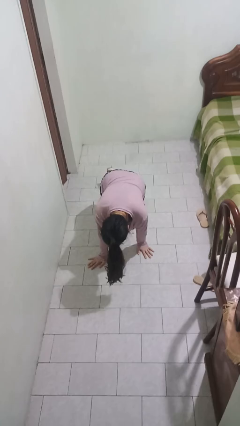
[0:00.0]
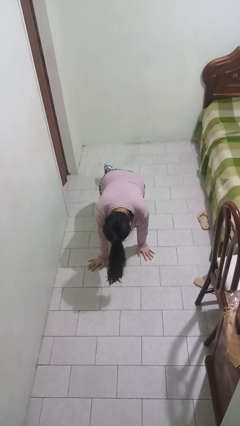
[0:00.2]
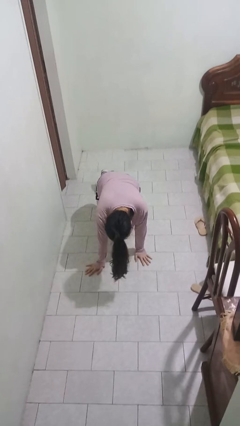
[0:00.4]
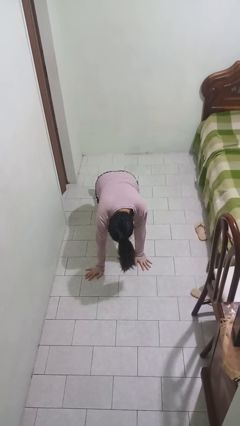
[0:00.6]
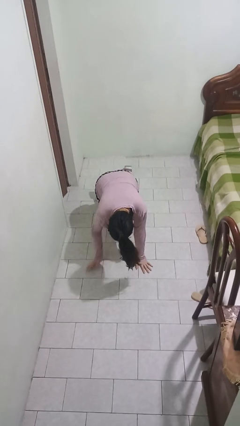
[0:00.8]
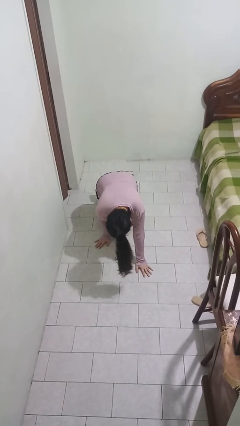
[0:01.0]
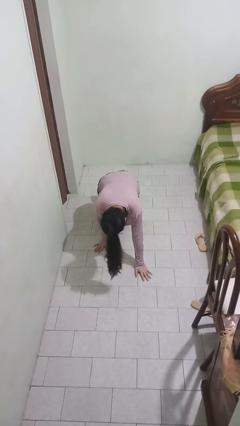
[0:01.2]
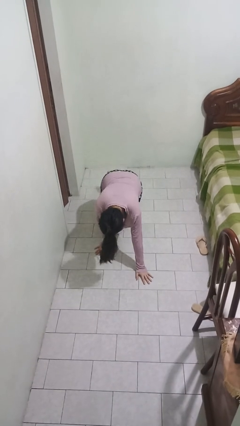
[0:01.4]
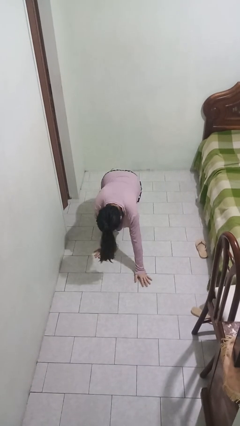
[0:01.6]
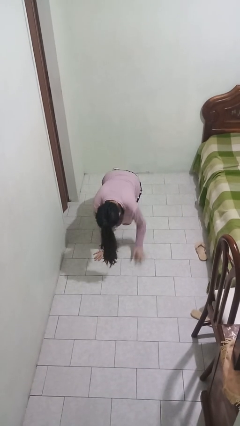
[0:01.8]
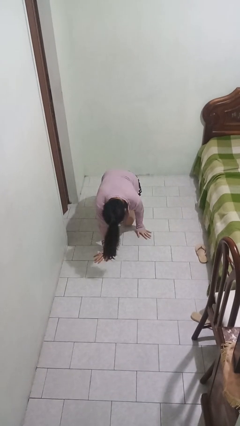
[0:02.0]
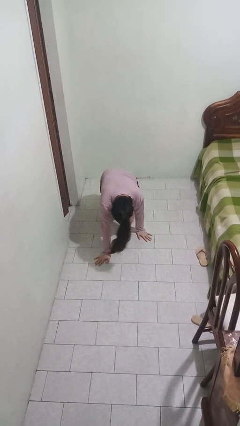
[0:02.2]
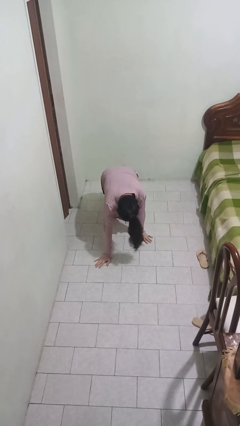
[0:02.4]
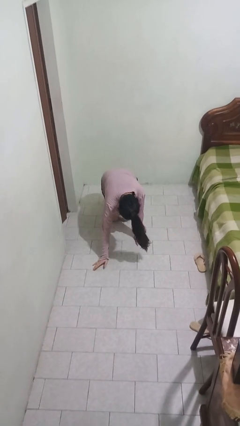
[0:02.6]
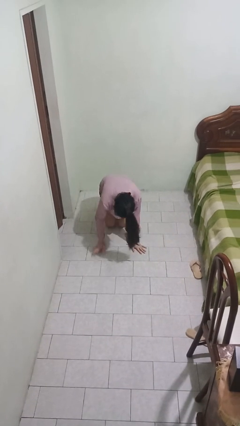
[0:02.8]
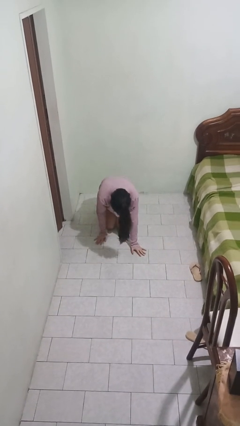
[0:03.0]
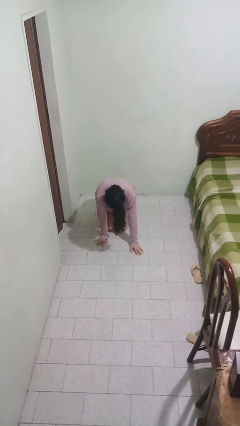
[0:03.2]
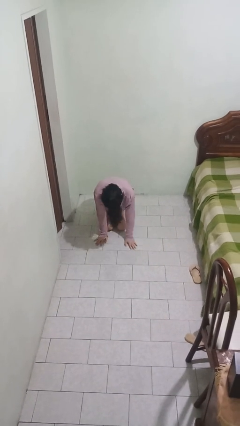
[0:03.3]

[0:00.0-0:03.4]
person crawls

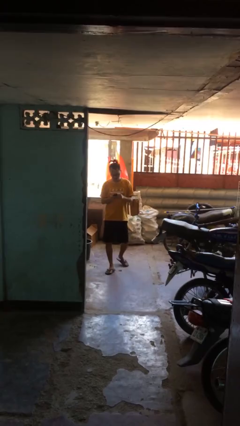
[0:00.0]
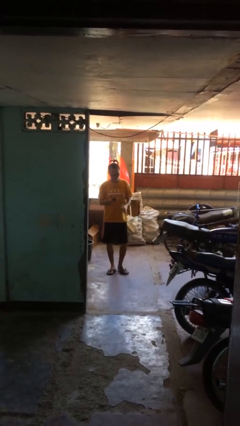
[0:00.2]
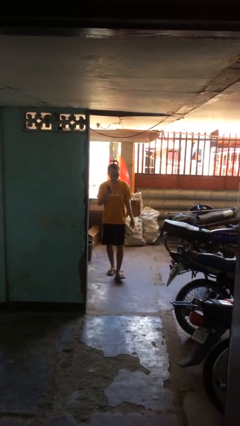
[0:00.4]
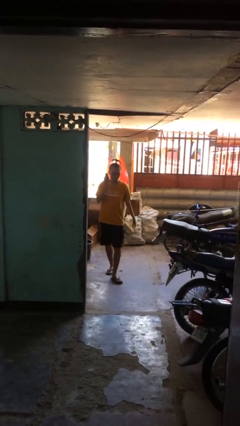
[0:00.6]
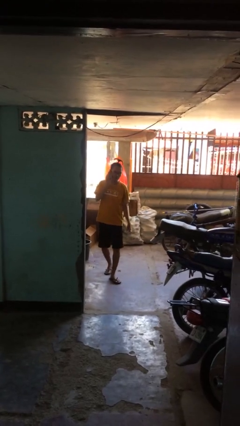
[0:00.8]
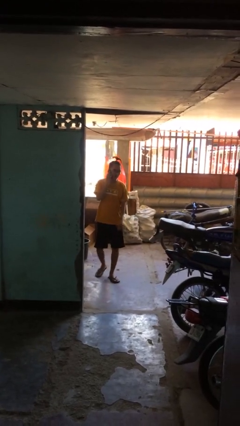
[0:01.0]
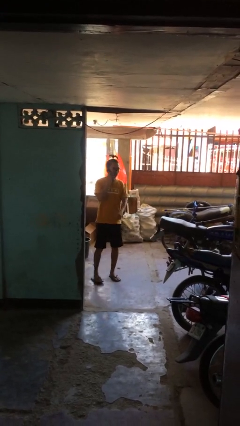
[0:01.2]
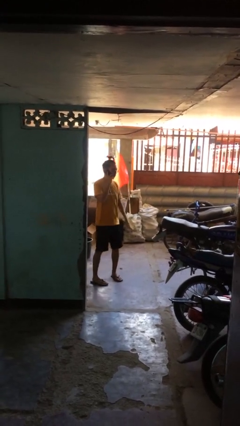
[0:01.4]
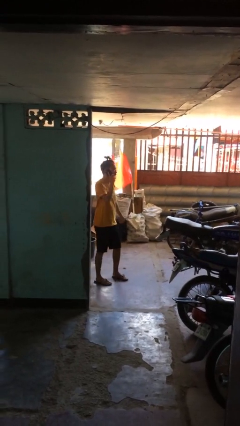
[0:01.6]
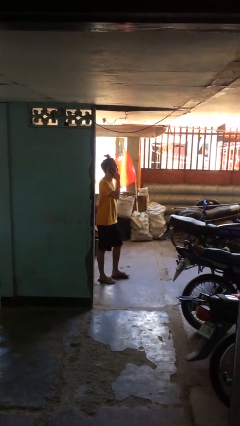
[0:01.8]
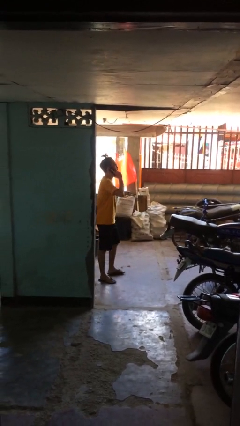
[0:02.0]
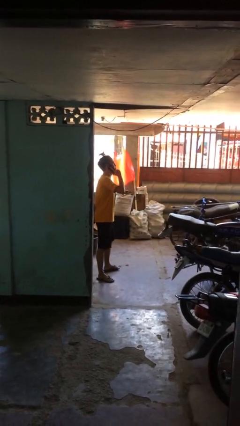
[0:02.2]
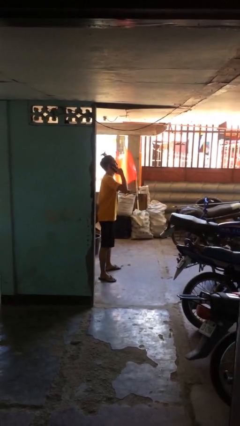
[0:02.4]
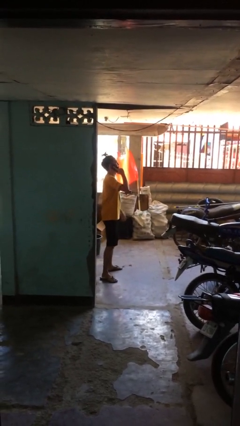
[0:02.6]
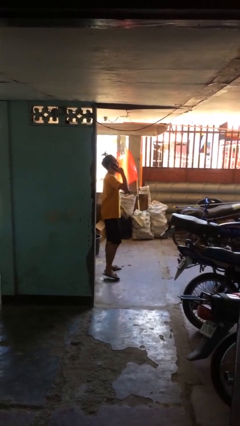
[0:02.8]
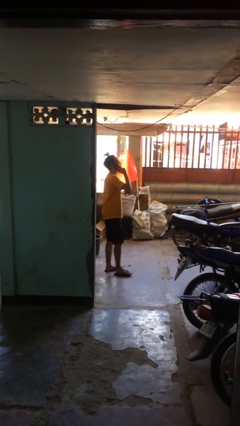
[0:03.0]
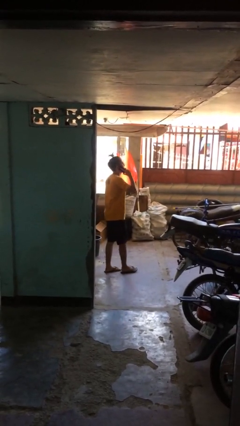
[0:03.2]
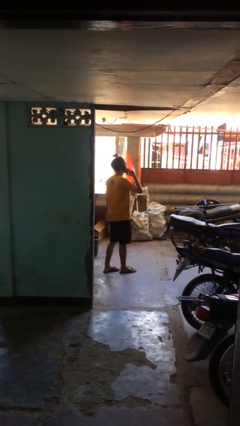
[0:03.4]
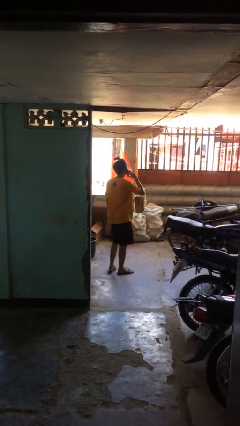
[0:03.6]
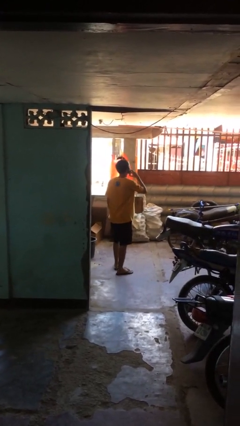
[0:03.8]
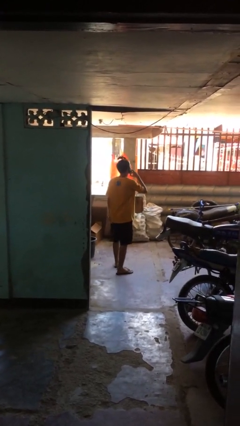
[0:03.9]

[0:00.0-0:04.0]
person talks on phone

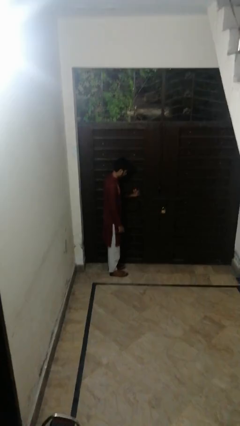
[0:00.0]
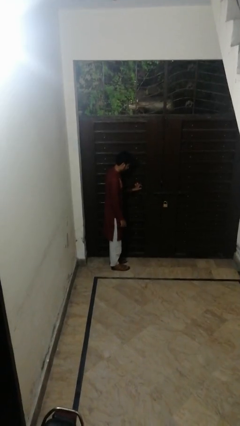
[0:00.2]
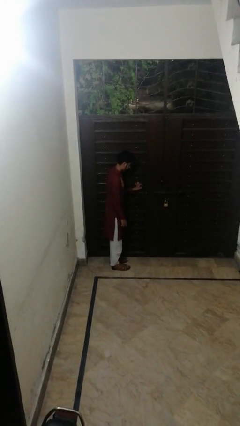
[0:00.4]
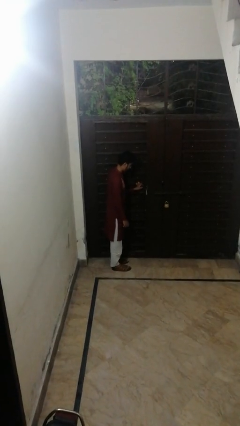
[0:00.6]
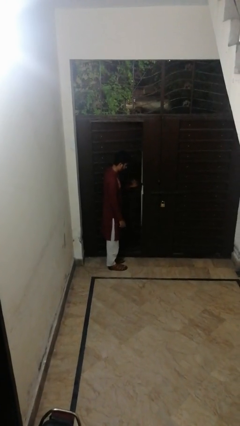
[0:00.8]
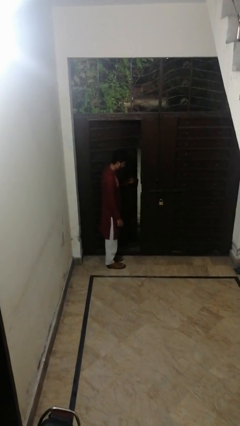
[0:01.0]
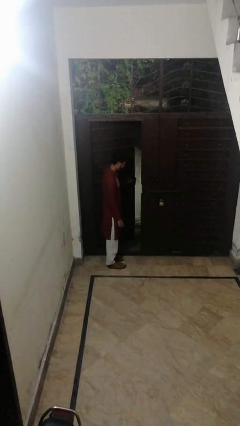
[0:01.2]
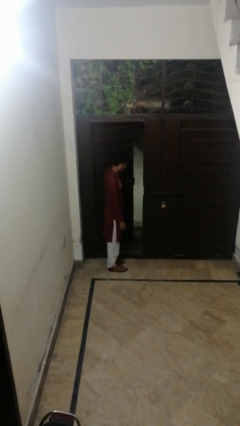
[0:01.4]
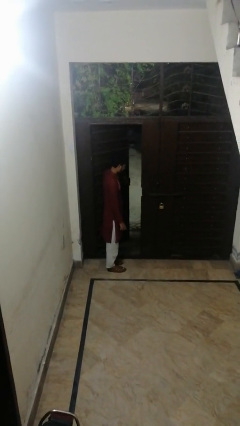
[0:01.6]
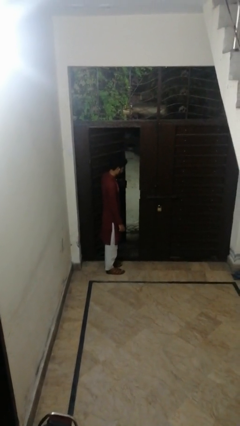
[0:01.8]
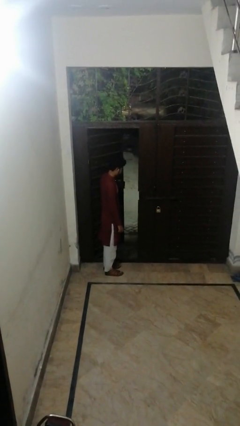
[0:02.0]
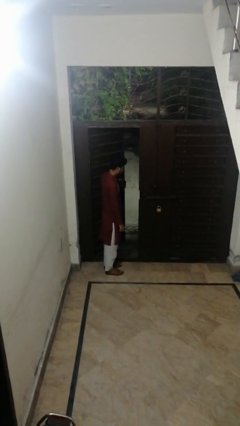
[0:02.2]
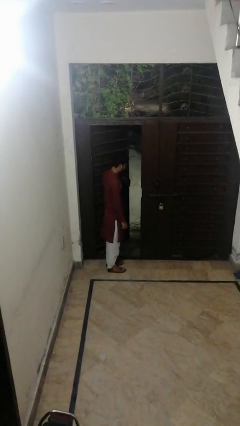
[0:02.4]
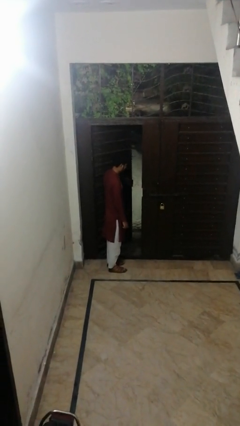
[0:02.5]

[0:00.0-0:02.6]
person opens facility door

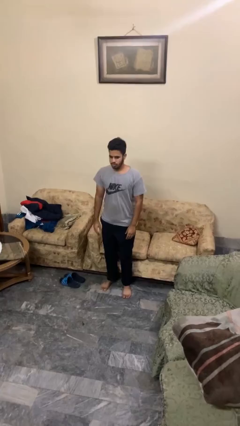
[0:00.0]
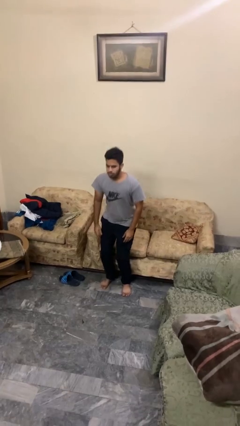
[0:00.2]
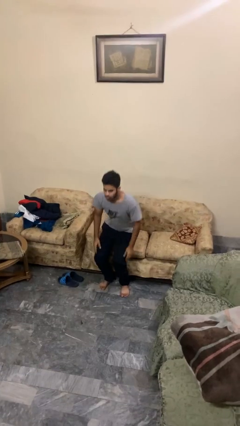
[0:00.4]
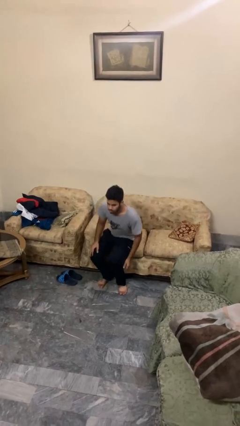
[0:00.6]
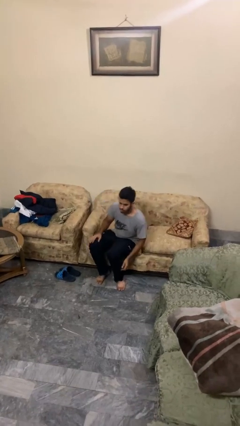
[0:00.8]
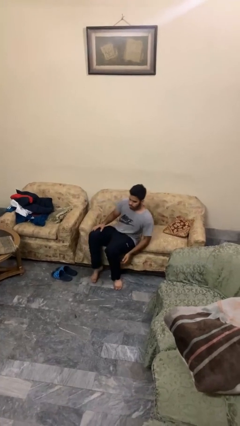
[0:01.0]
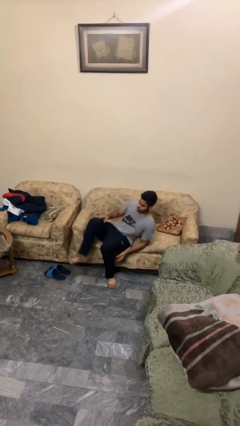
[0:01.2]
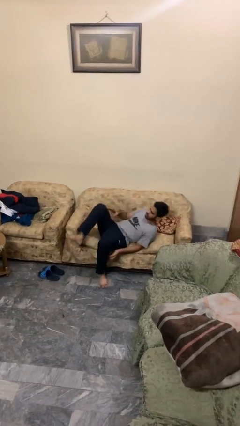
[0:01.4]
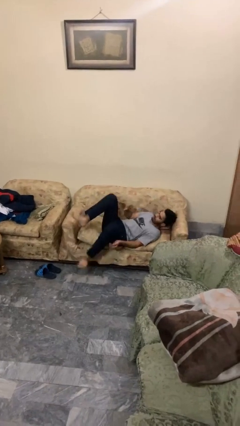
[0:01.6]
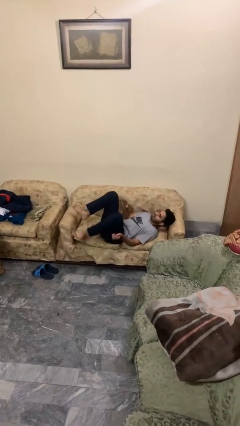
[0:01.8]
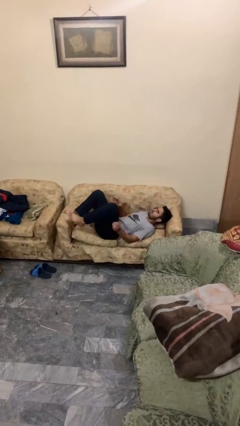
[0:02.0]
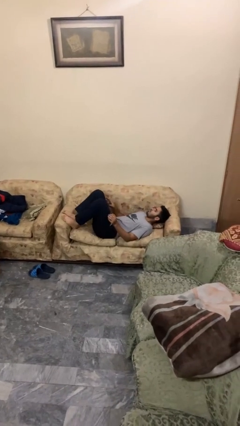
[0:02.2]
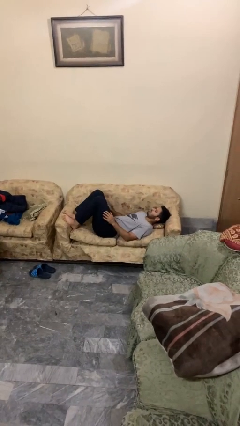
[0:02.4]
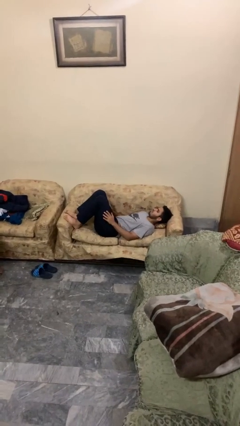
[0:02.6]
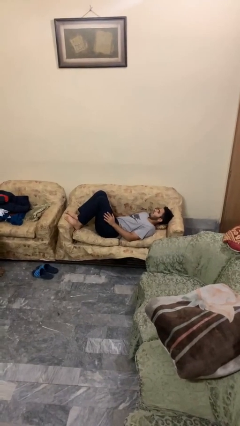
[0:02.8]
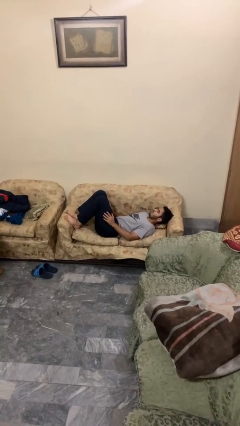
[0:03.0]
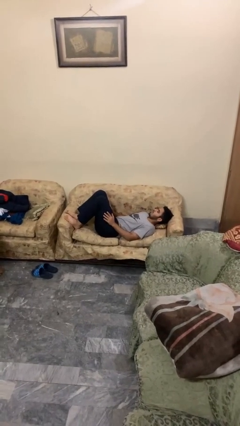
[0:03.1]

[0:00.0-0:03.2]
person lies down on couch

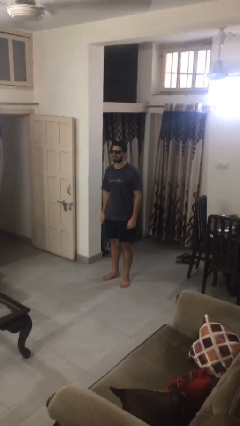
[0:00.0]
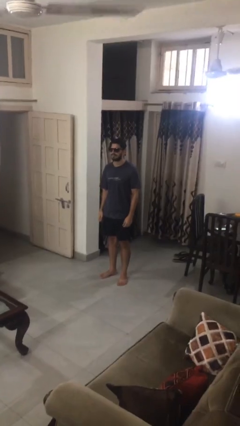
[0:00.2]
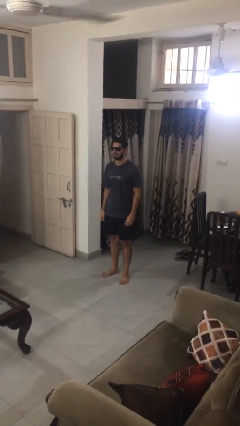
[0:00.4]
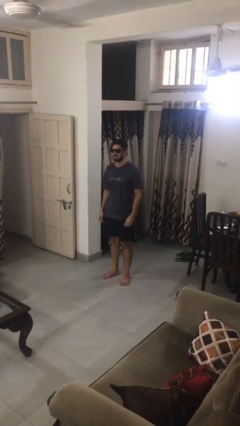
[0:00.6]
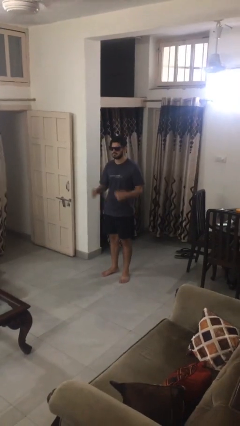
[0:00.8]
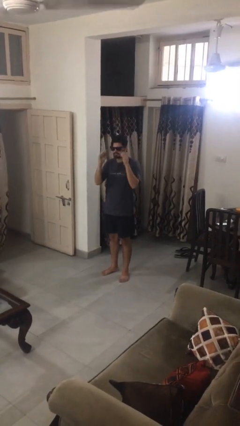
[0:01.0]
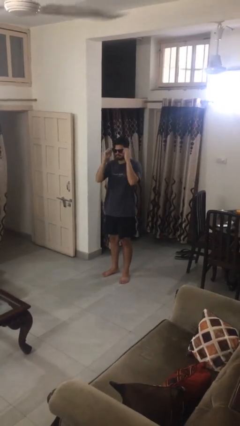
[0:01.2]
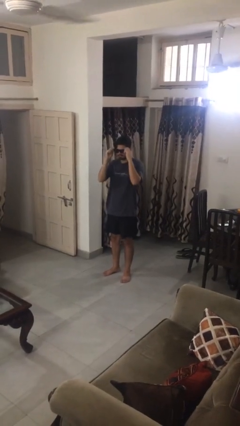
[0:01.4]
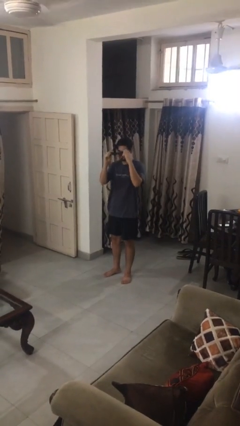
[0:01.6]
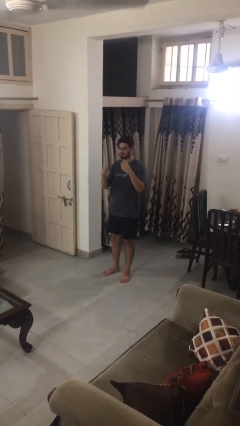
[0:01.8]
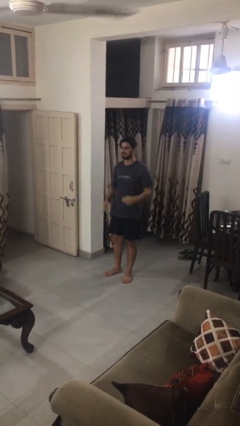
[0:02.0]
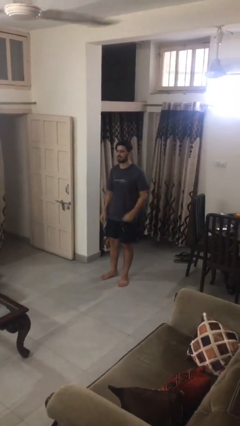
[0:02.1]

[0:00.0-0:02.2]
person takes off sunglasses

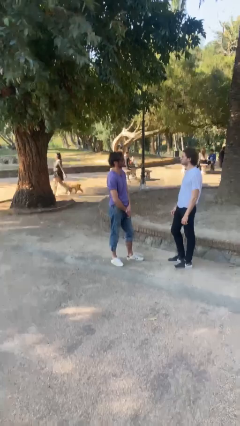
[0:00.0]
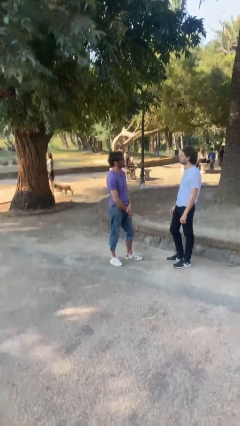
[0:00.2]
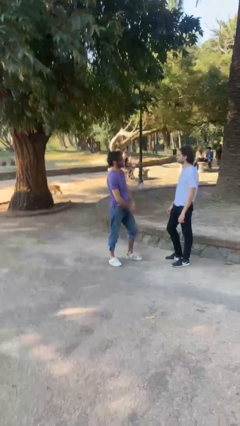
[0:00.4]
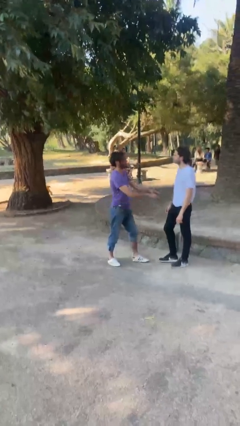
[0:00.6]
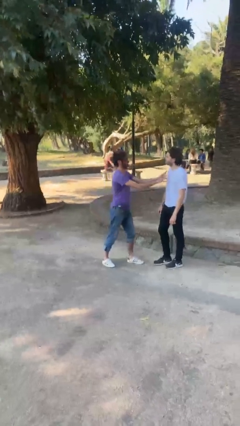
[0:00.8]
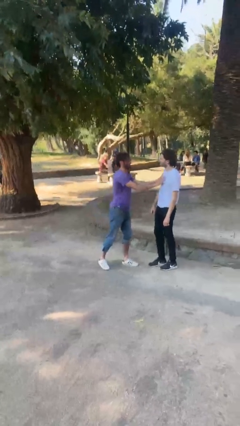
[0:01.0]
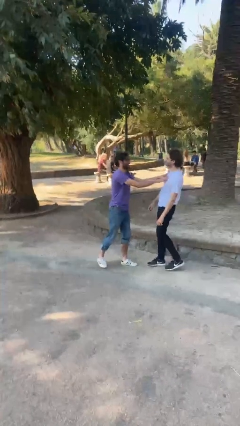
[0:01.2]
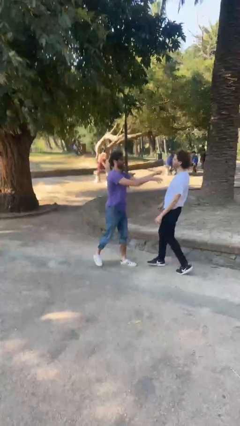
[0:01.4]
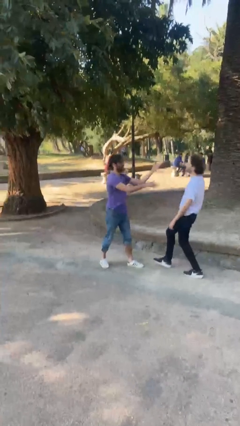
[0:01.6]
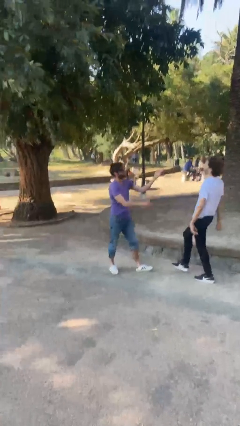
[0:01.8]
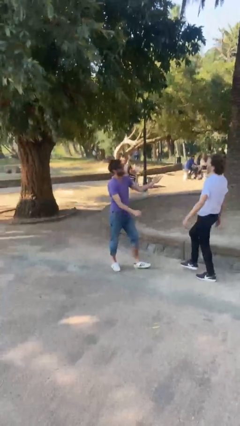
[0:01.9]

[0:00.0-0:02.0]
person shoves person
